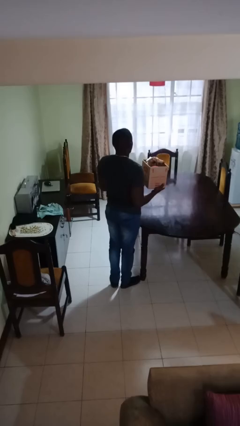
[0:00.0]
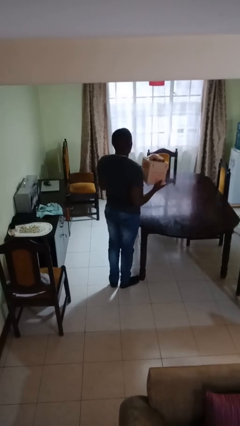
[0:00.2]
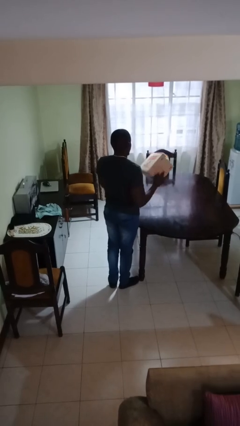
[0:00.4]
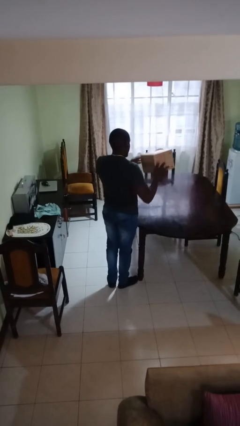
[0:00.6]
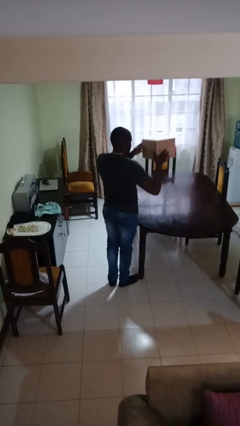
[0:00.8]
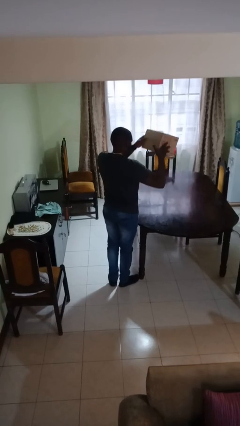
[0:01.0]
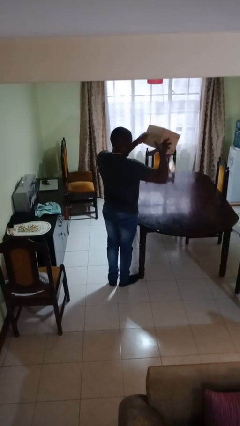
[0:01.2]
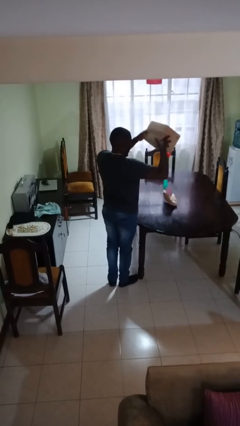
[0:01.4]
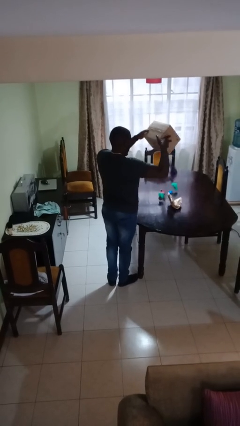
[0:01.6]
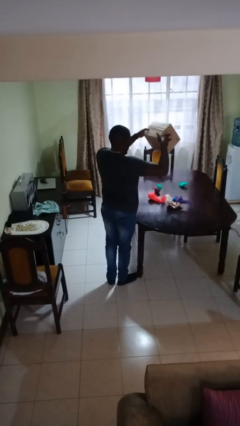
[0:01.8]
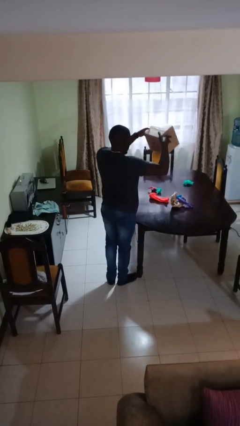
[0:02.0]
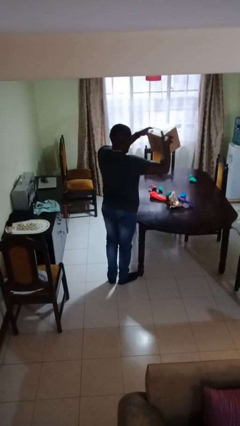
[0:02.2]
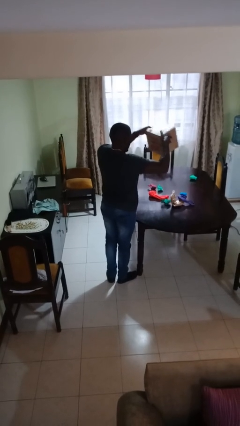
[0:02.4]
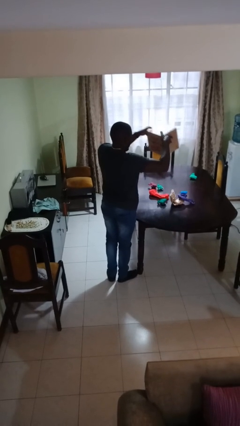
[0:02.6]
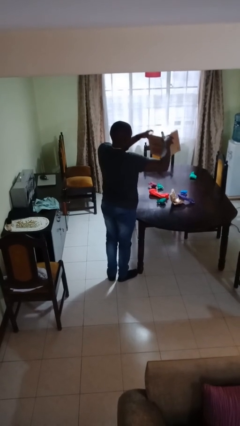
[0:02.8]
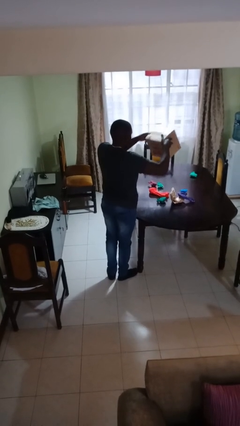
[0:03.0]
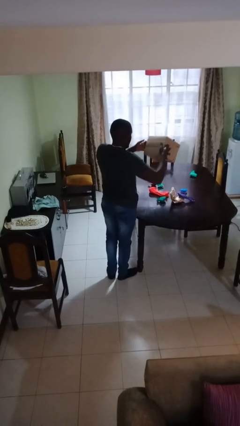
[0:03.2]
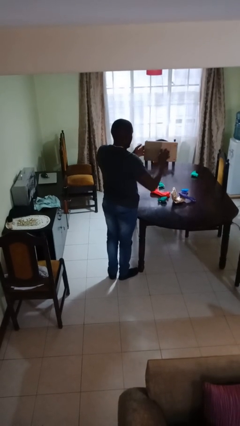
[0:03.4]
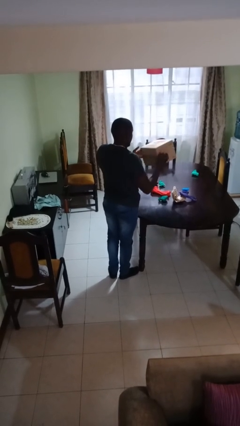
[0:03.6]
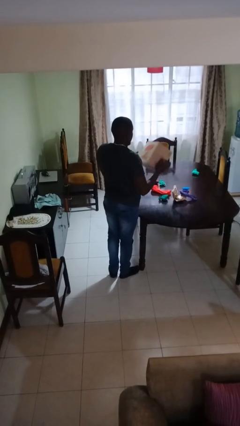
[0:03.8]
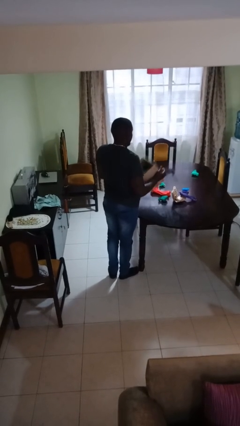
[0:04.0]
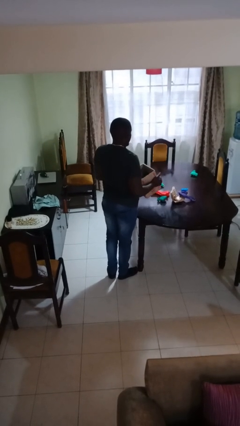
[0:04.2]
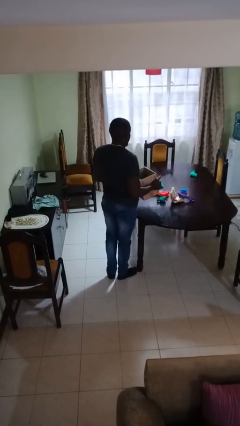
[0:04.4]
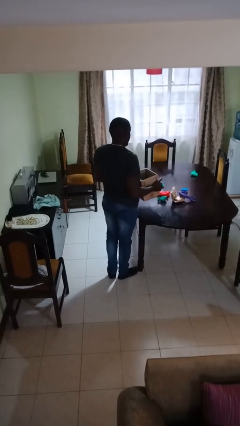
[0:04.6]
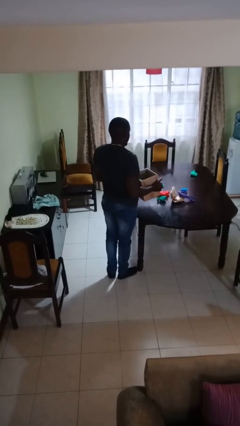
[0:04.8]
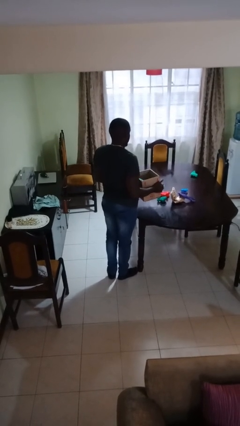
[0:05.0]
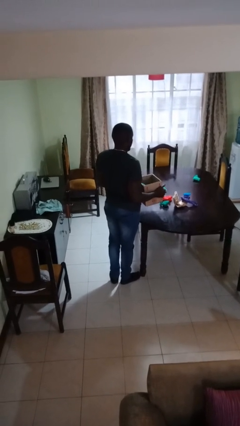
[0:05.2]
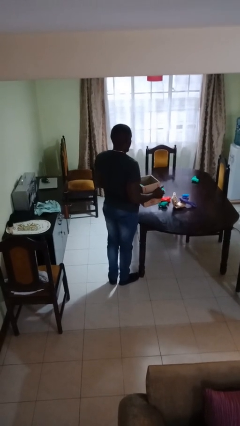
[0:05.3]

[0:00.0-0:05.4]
person unloads box onto table

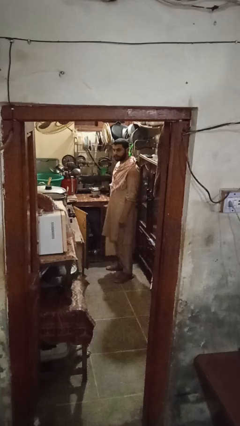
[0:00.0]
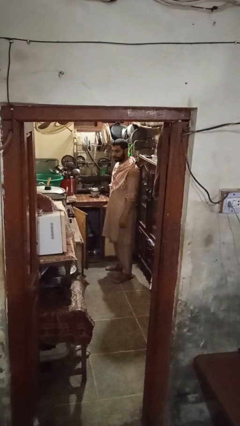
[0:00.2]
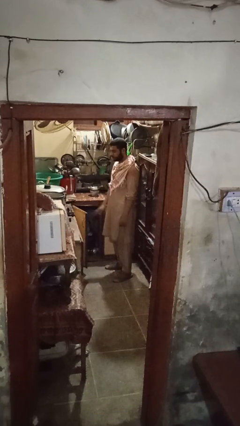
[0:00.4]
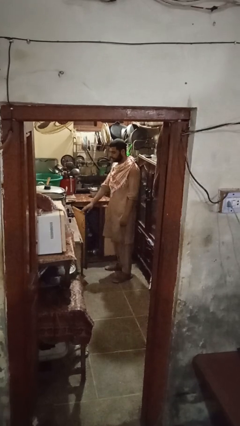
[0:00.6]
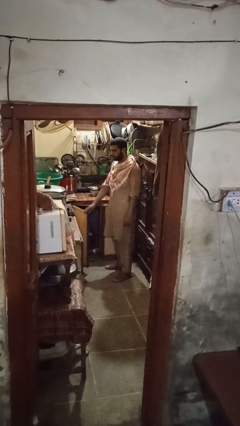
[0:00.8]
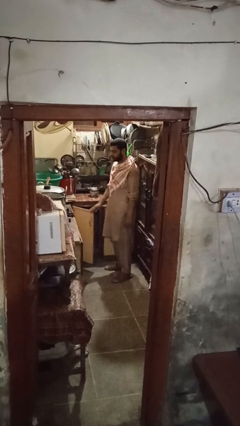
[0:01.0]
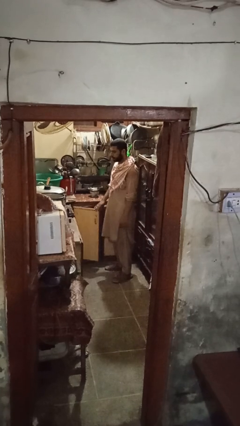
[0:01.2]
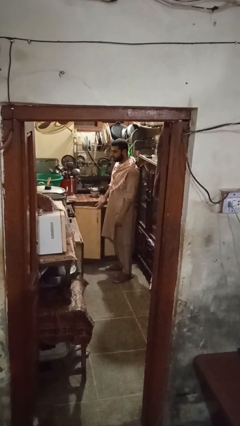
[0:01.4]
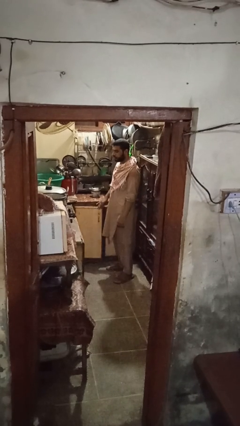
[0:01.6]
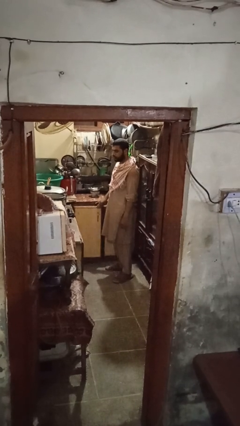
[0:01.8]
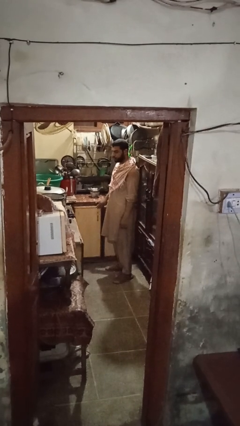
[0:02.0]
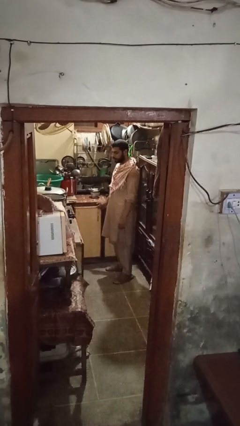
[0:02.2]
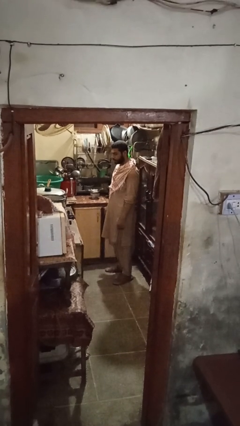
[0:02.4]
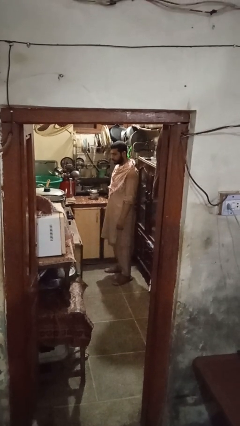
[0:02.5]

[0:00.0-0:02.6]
person closes cabinet

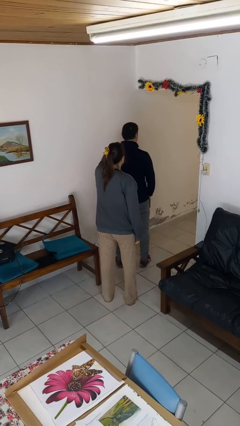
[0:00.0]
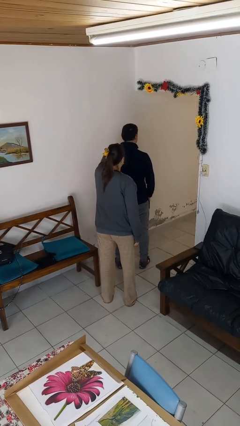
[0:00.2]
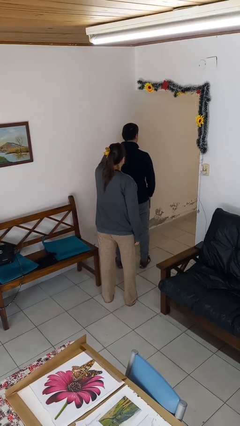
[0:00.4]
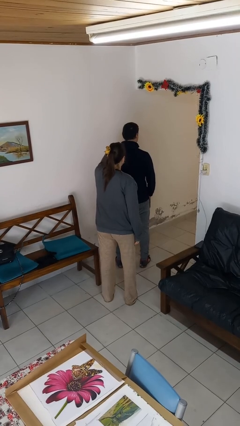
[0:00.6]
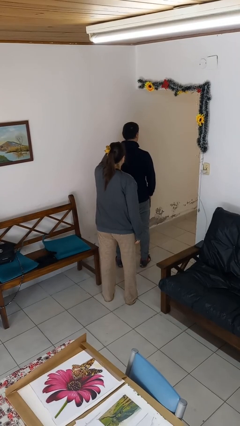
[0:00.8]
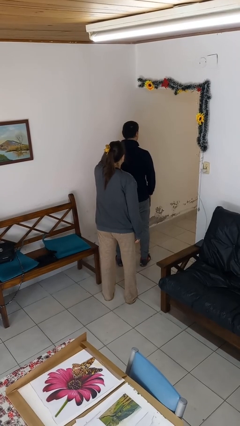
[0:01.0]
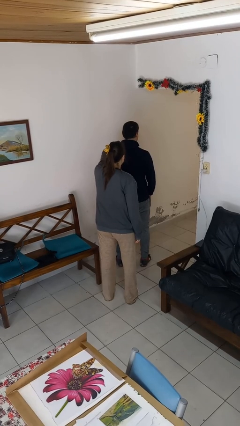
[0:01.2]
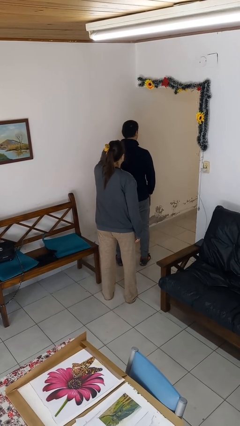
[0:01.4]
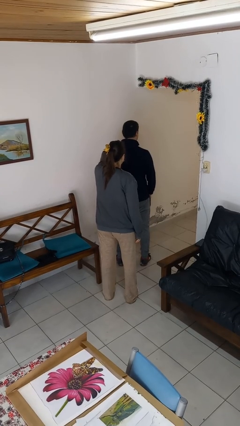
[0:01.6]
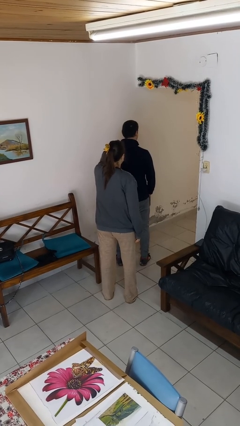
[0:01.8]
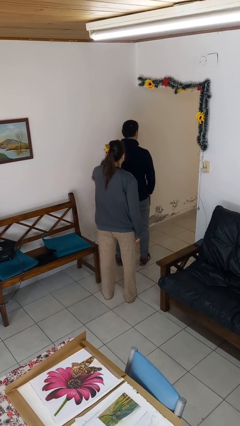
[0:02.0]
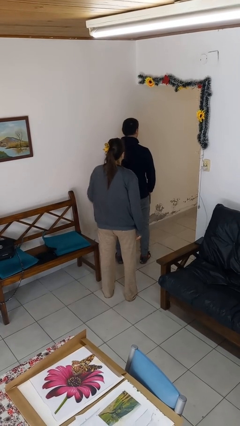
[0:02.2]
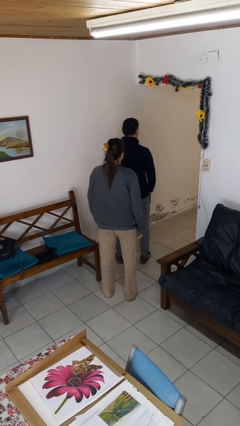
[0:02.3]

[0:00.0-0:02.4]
person touches back of person

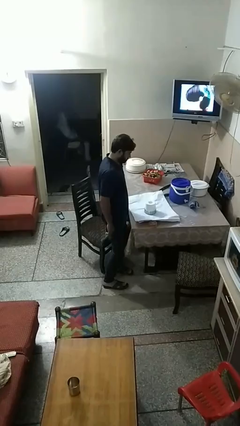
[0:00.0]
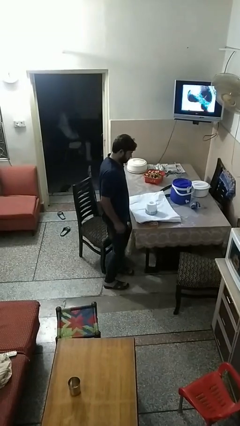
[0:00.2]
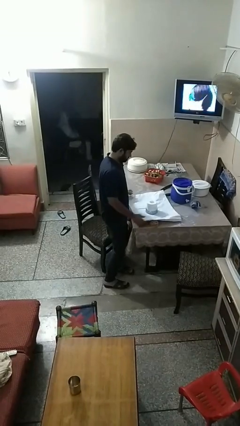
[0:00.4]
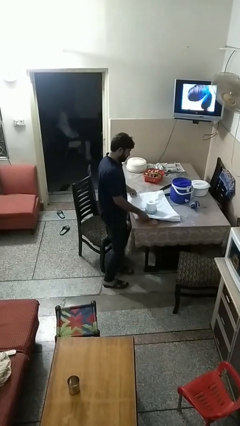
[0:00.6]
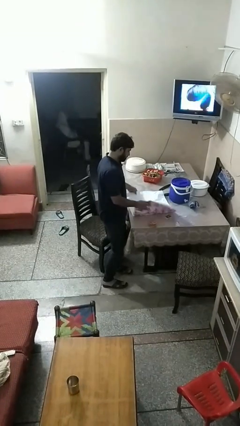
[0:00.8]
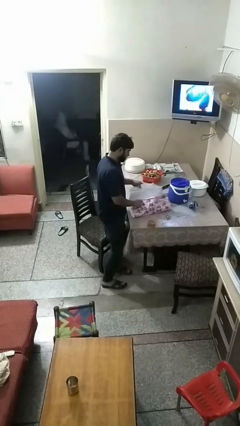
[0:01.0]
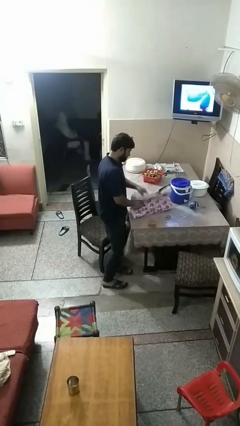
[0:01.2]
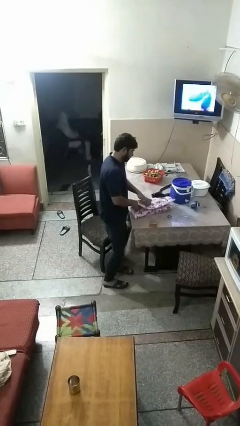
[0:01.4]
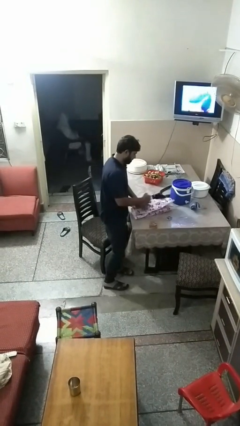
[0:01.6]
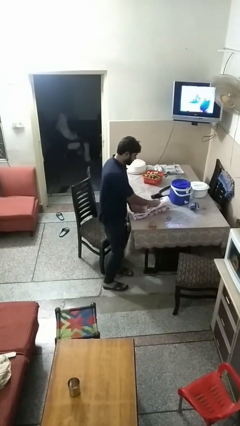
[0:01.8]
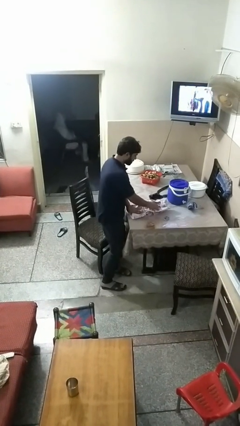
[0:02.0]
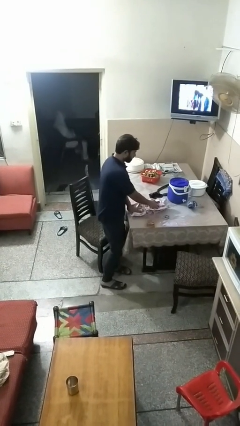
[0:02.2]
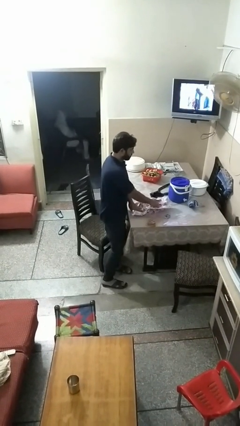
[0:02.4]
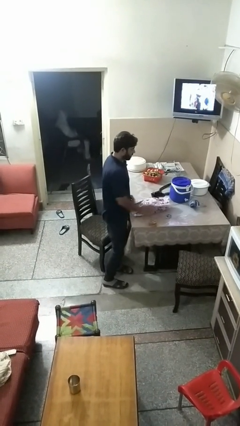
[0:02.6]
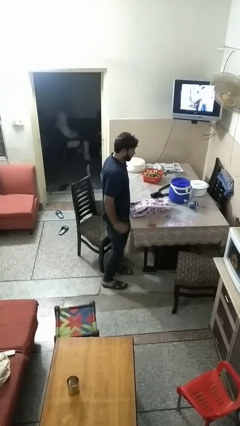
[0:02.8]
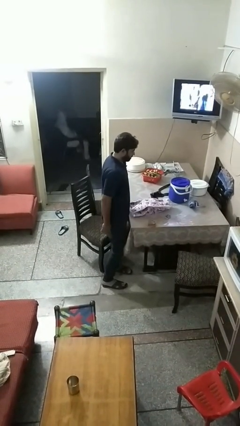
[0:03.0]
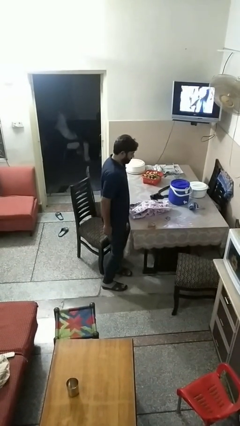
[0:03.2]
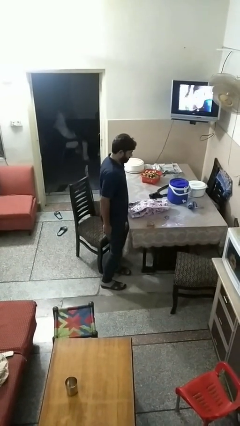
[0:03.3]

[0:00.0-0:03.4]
person wraps box

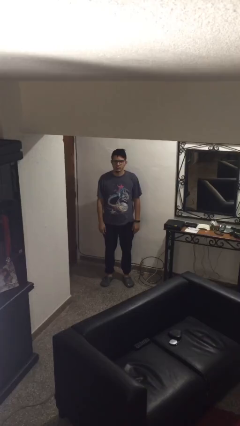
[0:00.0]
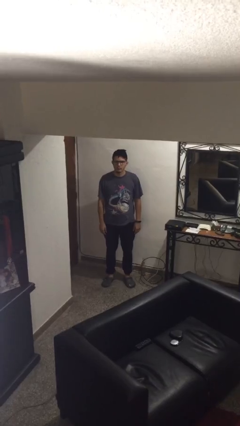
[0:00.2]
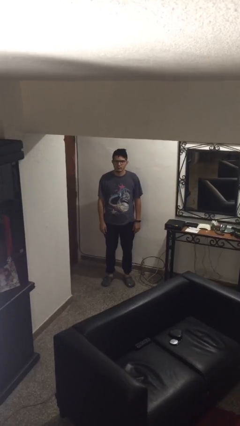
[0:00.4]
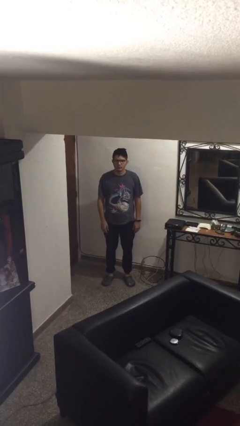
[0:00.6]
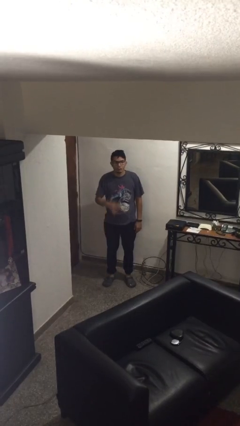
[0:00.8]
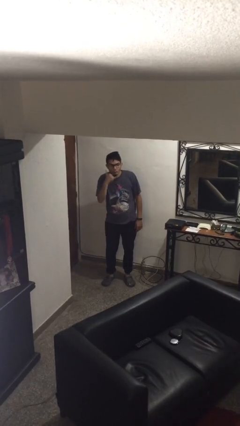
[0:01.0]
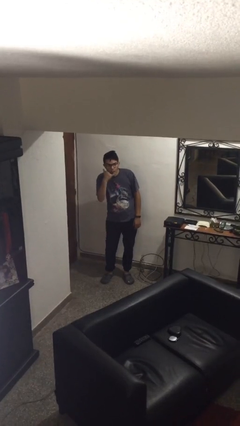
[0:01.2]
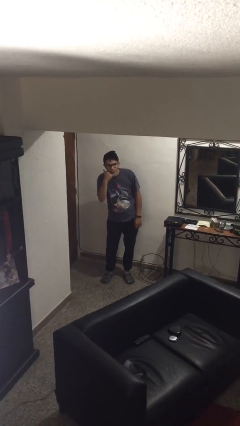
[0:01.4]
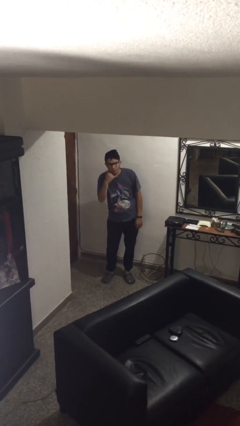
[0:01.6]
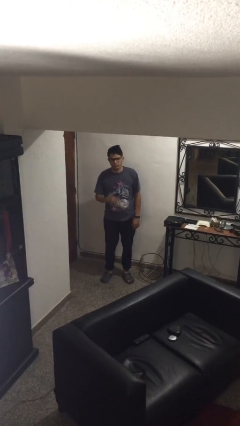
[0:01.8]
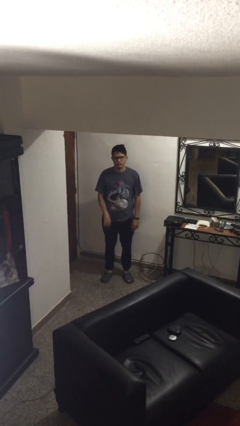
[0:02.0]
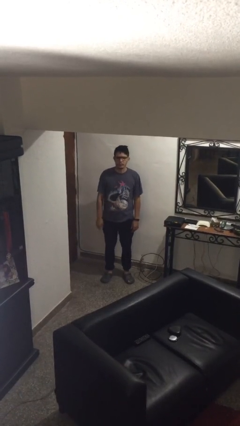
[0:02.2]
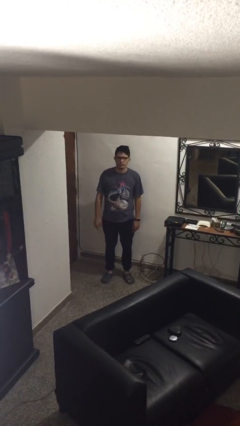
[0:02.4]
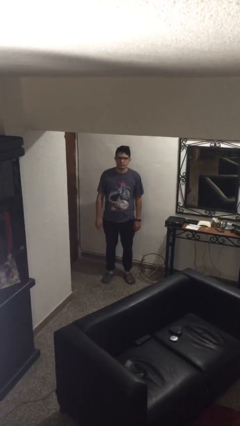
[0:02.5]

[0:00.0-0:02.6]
person gestures call me

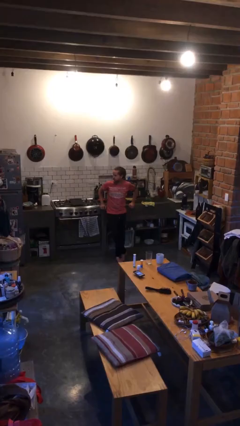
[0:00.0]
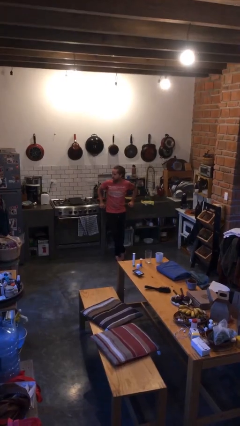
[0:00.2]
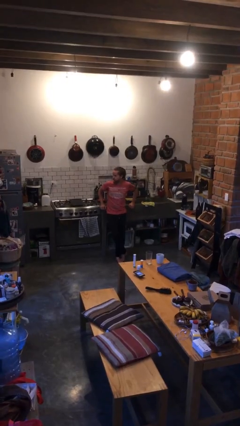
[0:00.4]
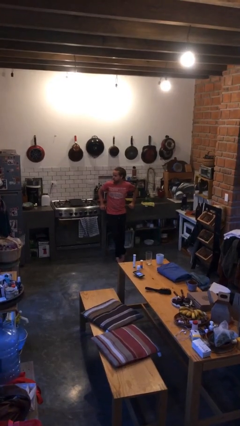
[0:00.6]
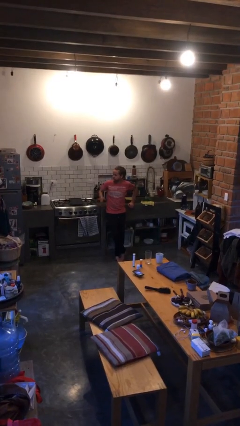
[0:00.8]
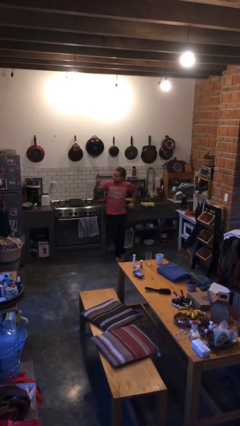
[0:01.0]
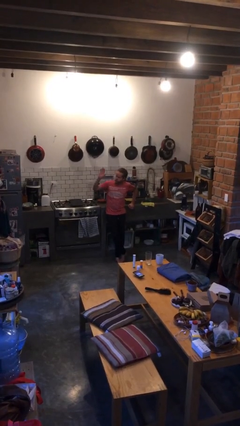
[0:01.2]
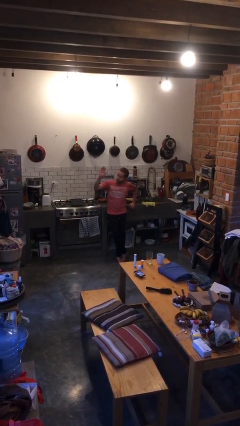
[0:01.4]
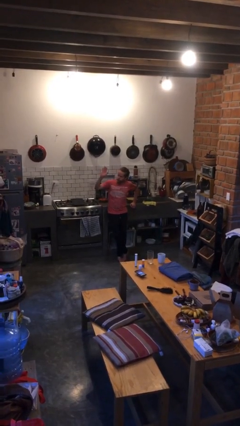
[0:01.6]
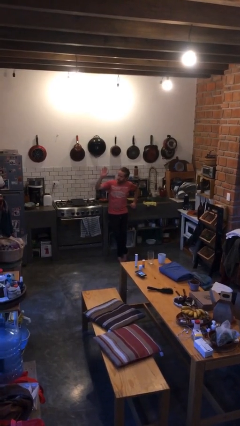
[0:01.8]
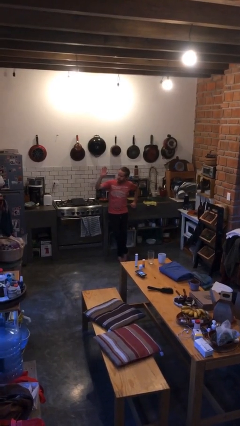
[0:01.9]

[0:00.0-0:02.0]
person gestures raise hand
